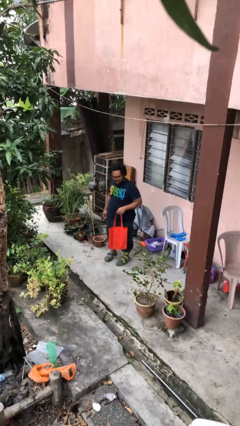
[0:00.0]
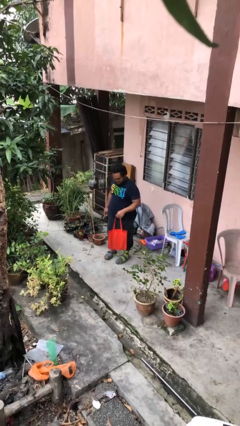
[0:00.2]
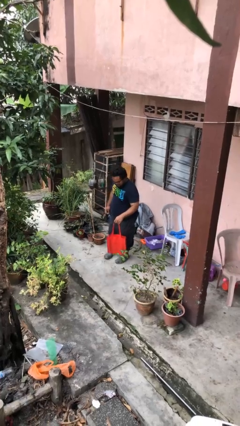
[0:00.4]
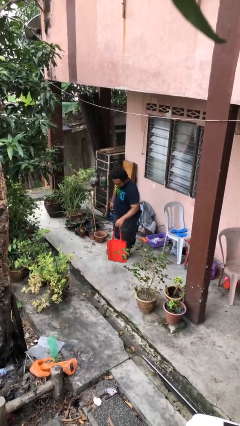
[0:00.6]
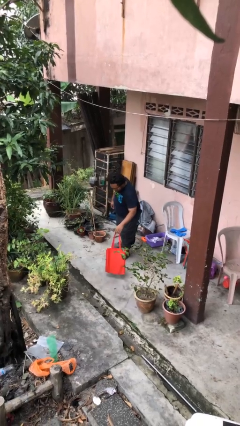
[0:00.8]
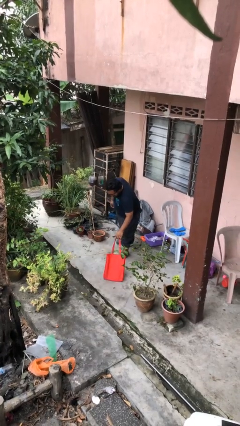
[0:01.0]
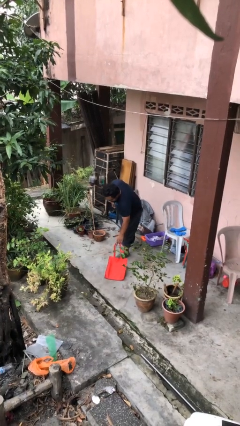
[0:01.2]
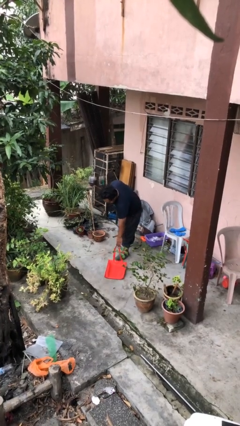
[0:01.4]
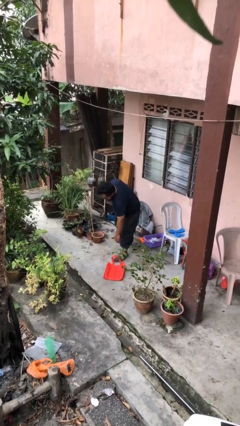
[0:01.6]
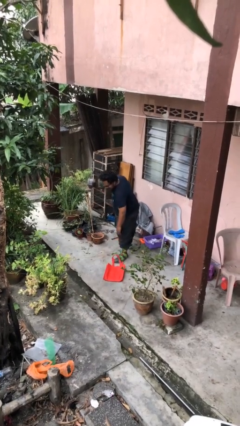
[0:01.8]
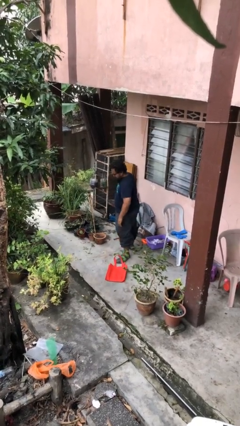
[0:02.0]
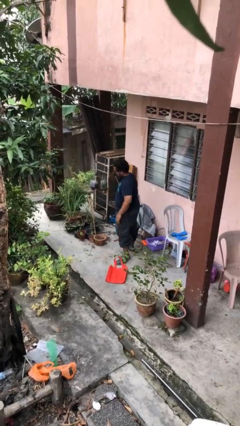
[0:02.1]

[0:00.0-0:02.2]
person puts down object on floor

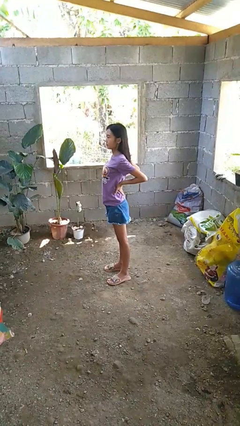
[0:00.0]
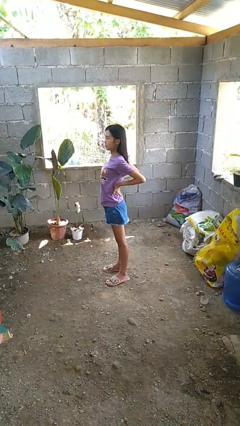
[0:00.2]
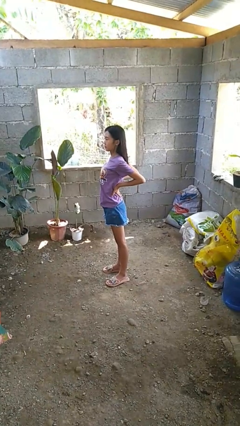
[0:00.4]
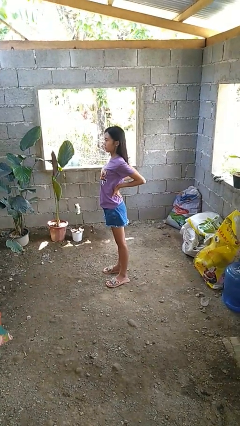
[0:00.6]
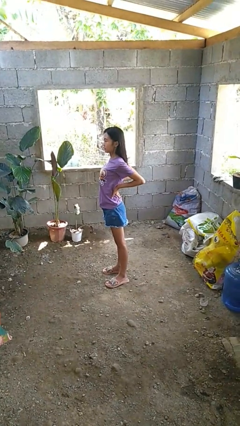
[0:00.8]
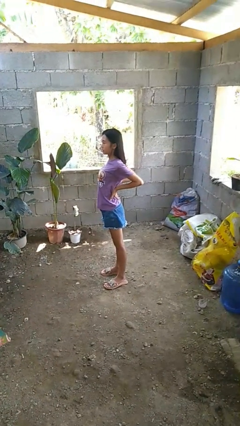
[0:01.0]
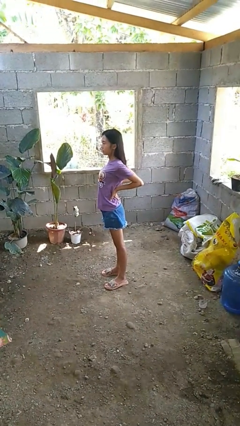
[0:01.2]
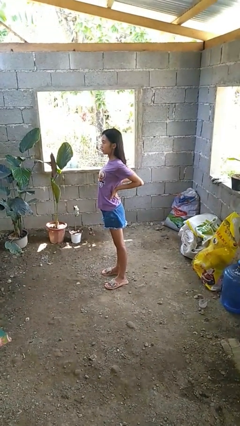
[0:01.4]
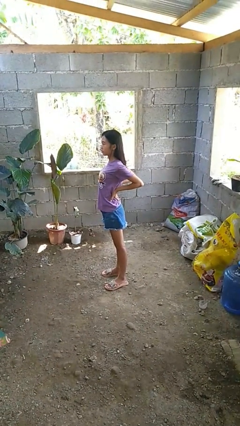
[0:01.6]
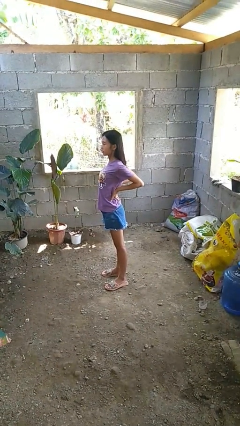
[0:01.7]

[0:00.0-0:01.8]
person stretches back

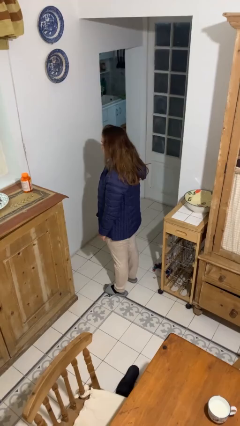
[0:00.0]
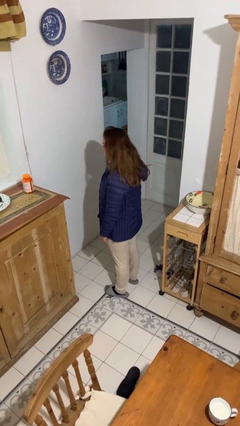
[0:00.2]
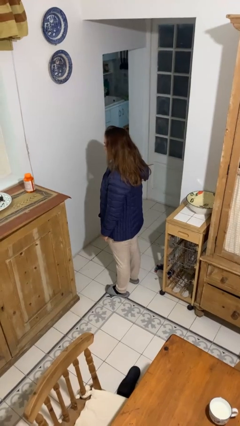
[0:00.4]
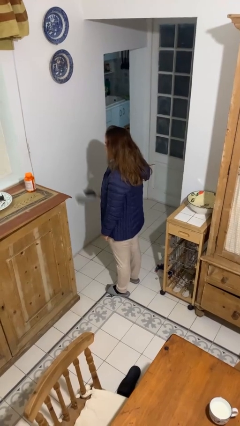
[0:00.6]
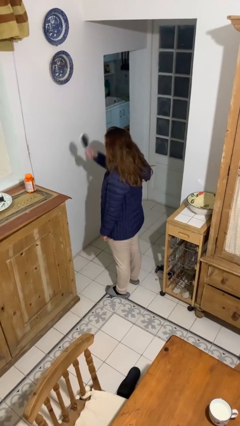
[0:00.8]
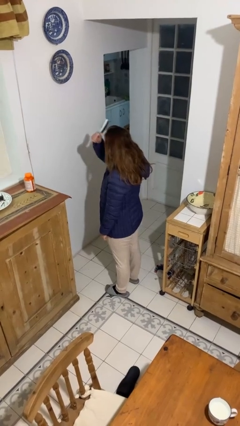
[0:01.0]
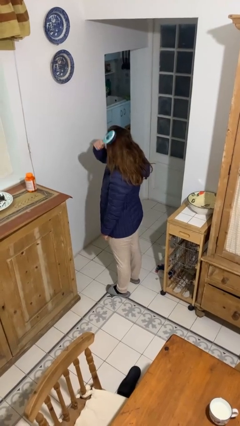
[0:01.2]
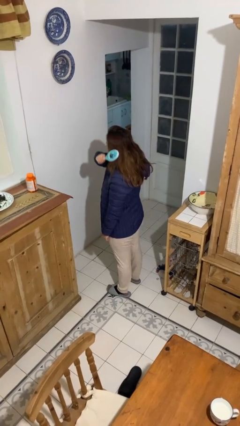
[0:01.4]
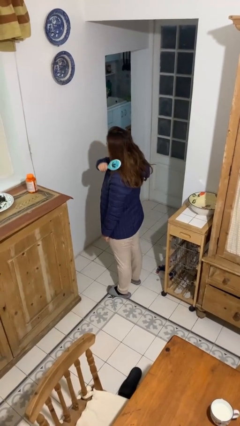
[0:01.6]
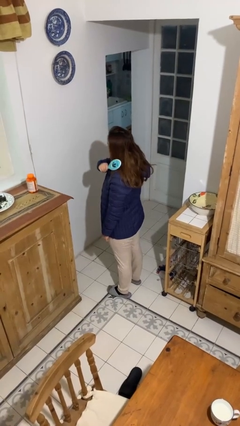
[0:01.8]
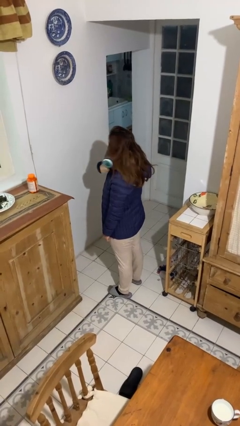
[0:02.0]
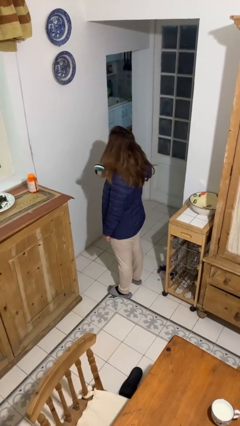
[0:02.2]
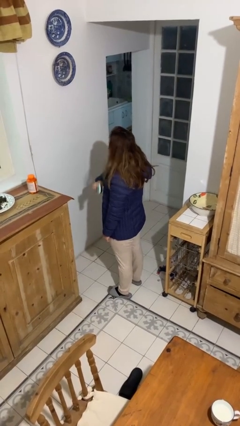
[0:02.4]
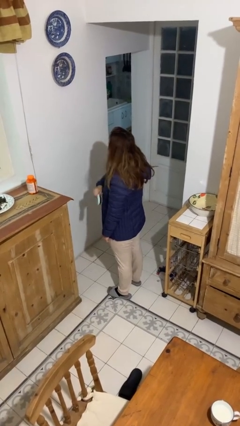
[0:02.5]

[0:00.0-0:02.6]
person brushes hair

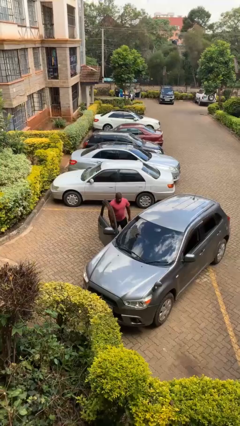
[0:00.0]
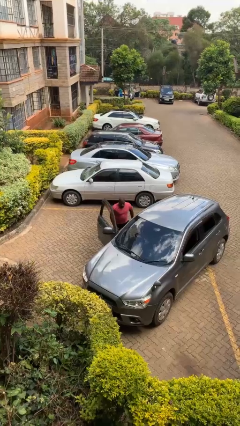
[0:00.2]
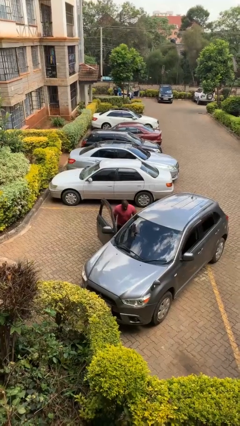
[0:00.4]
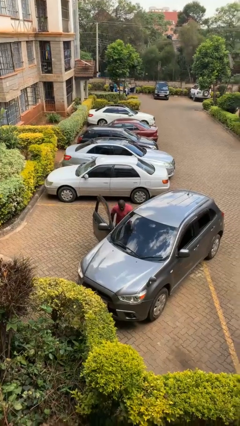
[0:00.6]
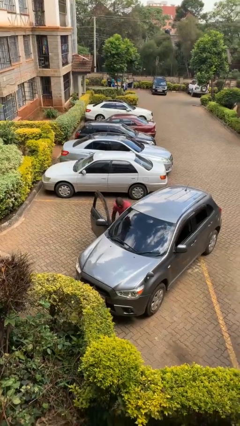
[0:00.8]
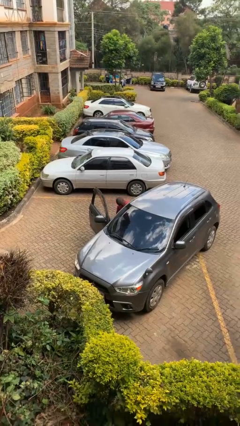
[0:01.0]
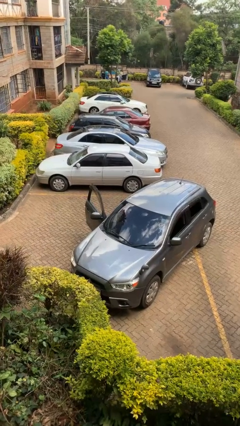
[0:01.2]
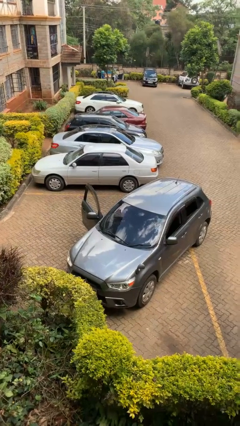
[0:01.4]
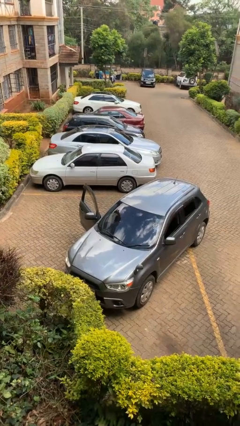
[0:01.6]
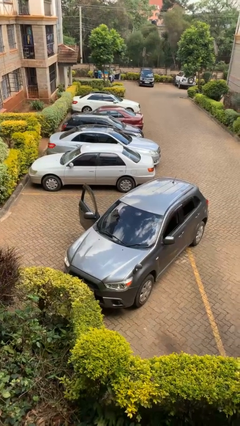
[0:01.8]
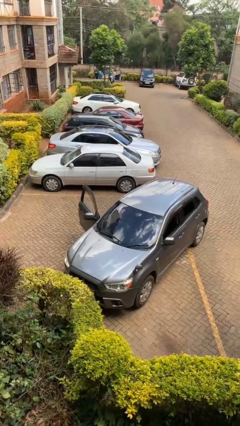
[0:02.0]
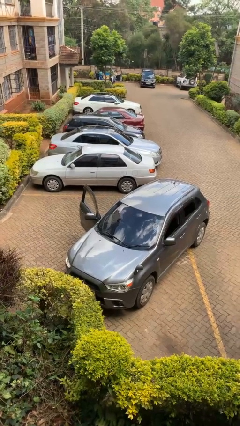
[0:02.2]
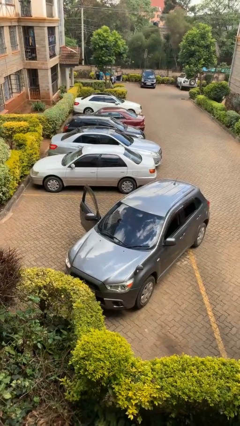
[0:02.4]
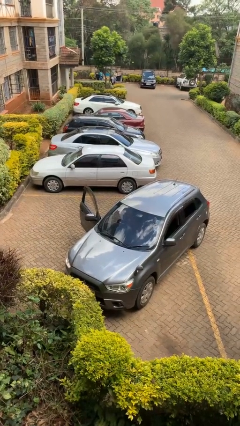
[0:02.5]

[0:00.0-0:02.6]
person enters car

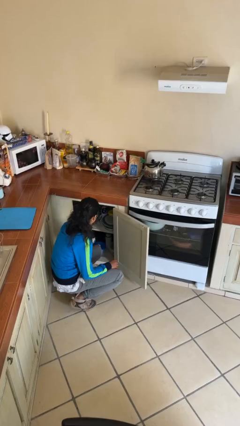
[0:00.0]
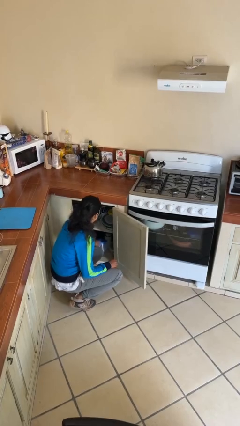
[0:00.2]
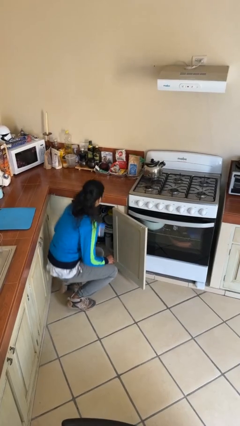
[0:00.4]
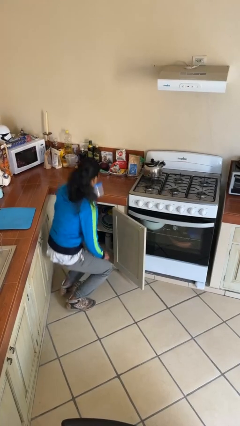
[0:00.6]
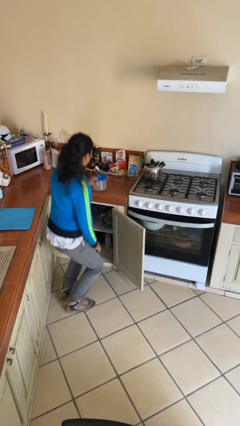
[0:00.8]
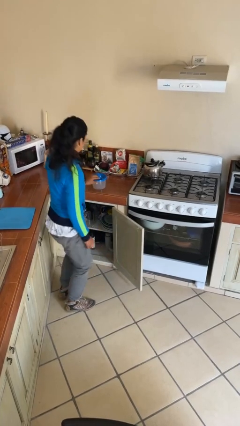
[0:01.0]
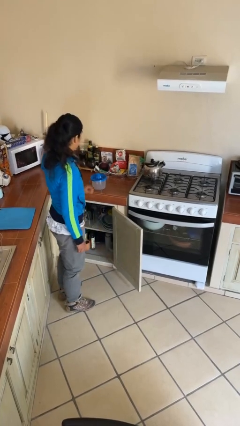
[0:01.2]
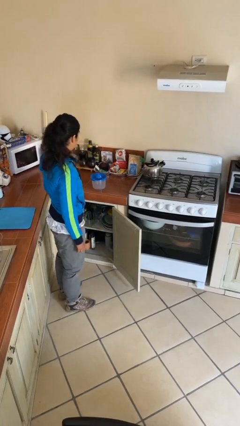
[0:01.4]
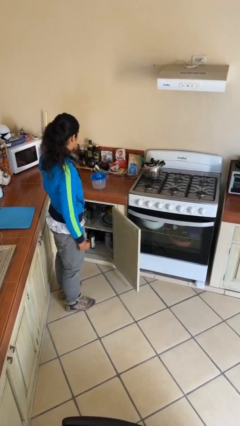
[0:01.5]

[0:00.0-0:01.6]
person takes object from cabinet

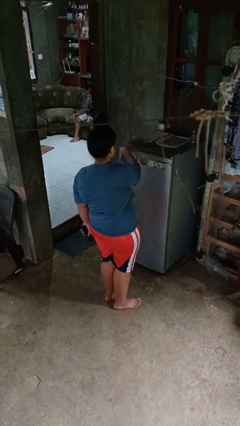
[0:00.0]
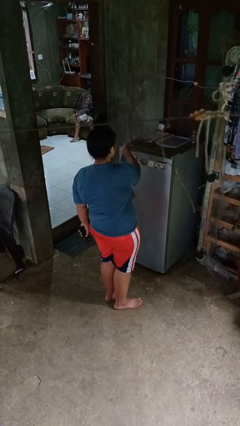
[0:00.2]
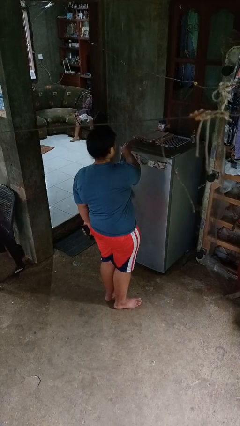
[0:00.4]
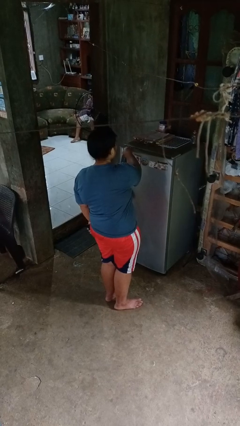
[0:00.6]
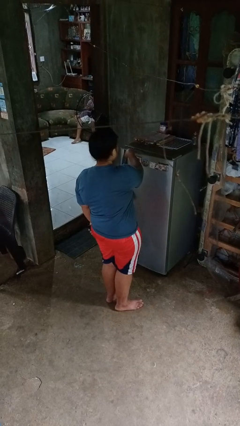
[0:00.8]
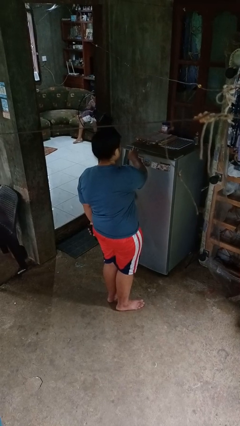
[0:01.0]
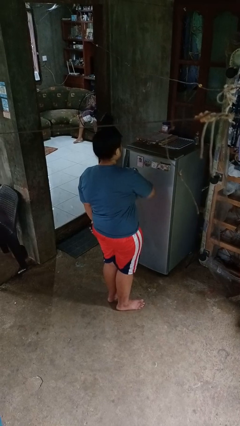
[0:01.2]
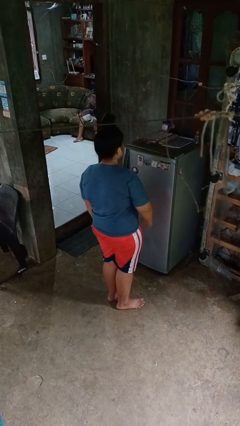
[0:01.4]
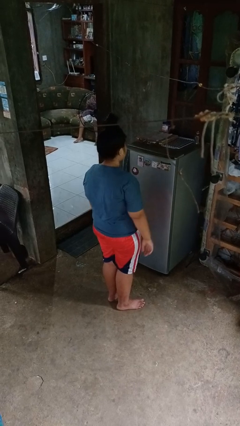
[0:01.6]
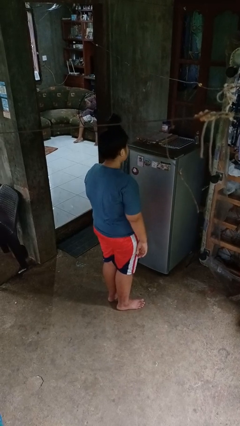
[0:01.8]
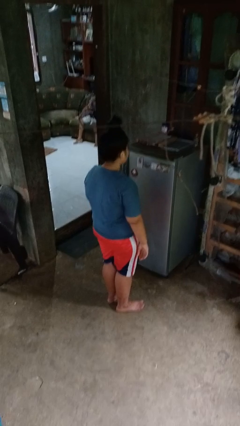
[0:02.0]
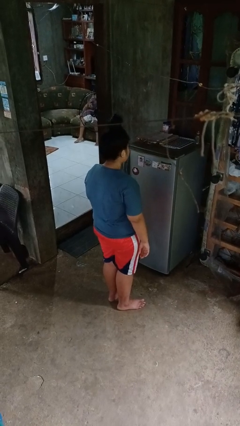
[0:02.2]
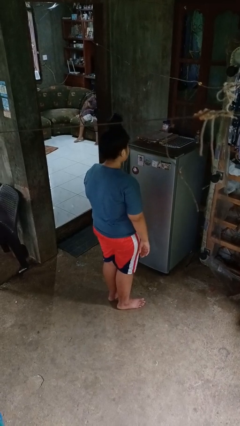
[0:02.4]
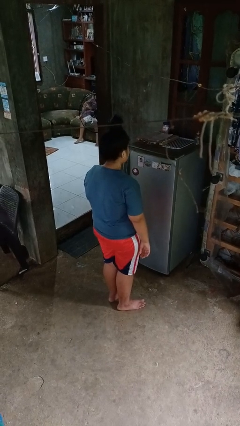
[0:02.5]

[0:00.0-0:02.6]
person taps object with finger

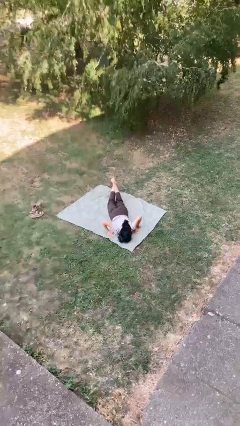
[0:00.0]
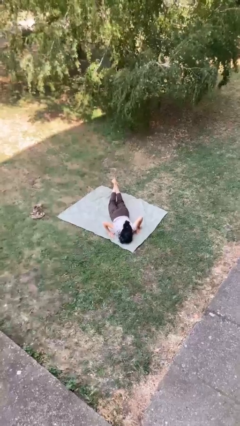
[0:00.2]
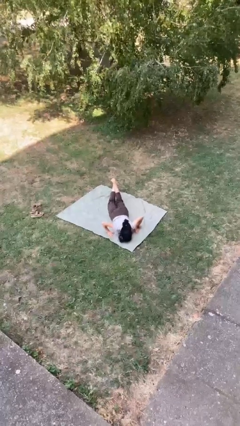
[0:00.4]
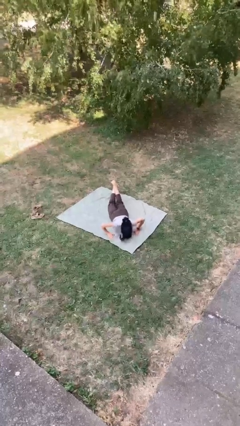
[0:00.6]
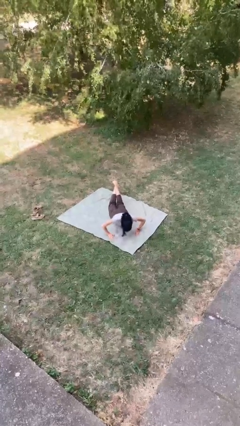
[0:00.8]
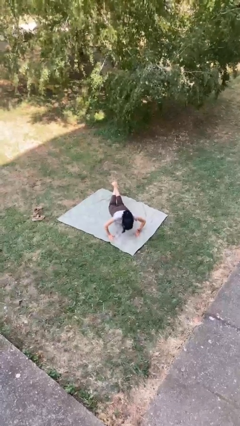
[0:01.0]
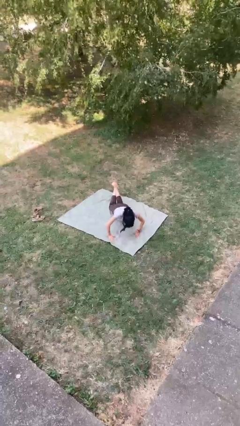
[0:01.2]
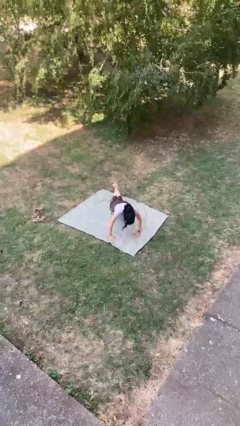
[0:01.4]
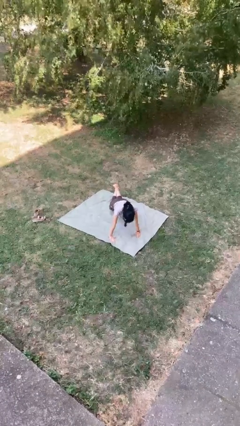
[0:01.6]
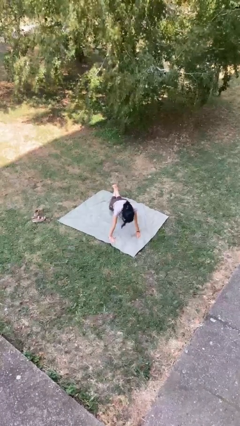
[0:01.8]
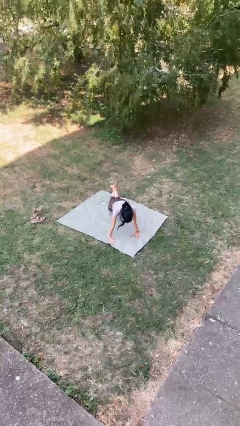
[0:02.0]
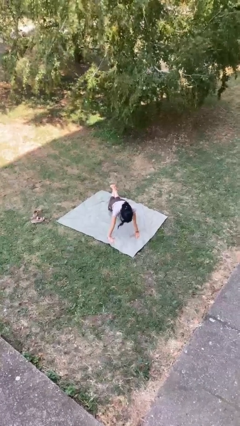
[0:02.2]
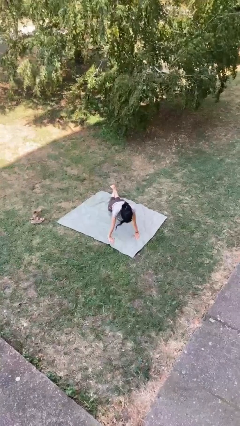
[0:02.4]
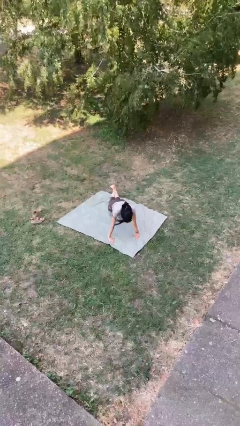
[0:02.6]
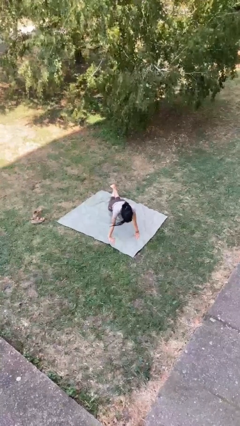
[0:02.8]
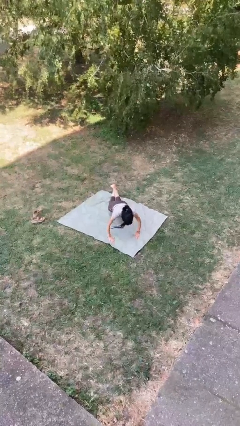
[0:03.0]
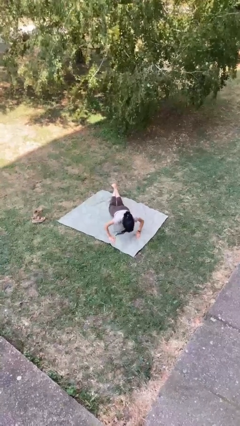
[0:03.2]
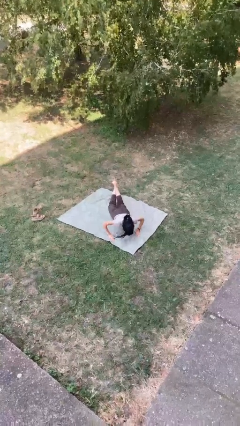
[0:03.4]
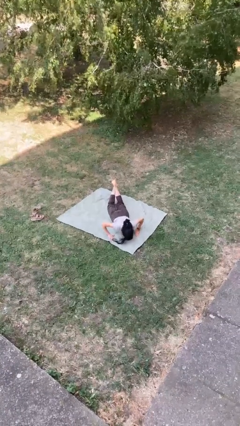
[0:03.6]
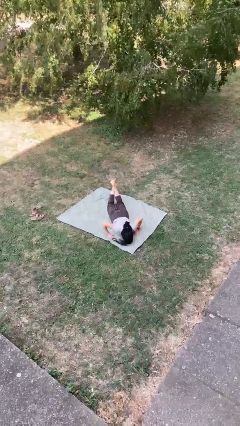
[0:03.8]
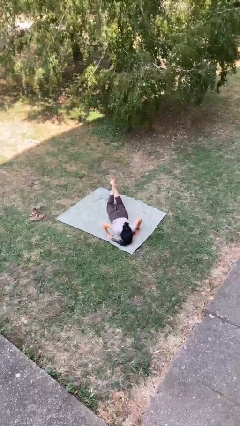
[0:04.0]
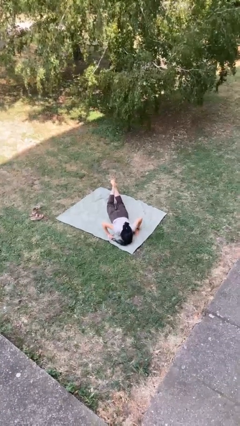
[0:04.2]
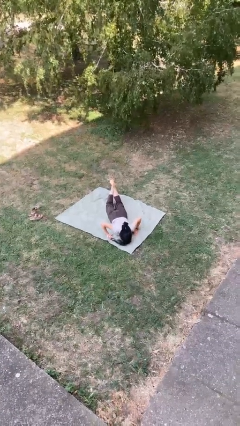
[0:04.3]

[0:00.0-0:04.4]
person exercises with pushup
